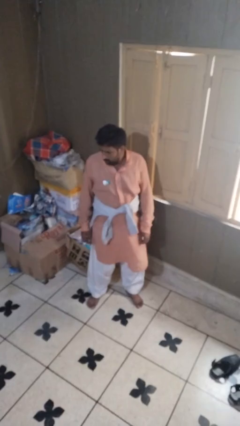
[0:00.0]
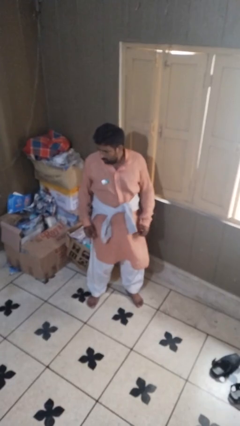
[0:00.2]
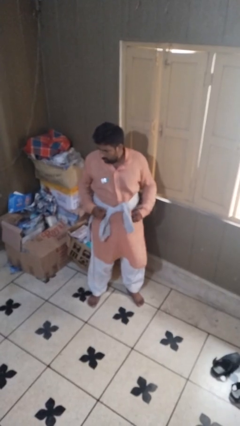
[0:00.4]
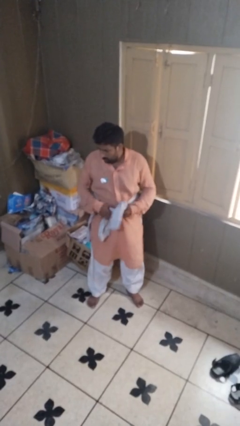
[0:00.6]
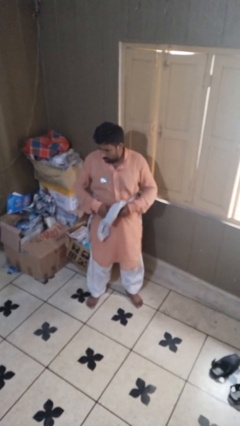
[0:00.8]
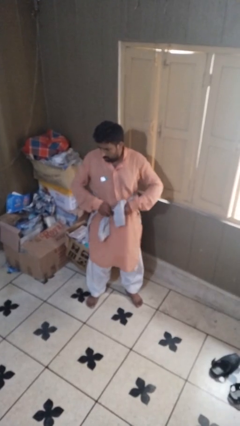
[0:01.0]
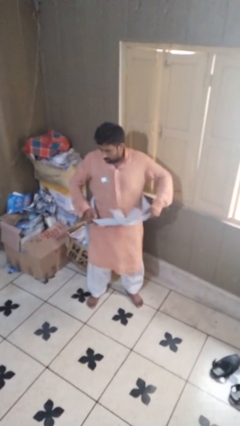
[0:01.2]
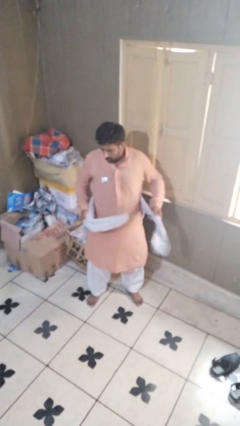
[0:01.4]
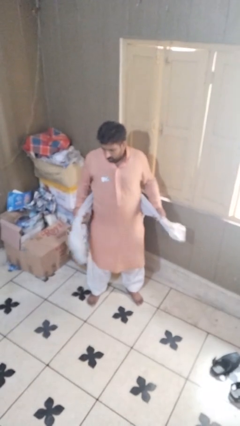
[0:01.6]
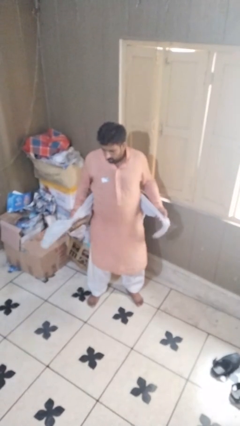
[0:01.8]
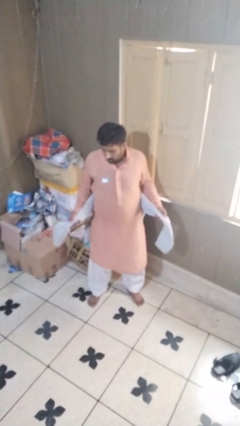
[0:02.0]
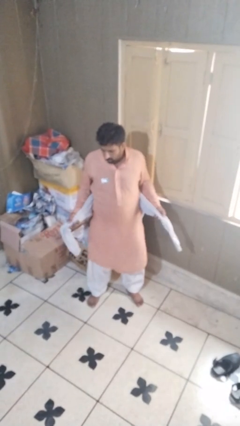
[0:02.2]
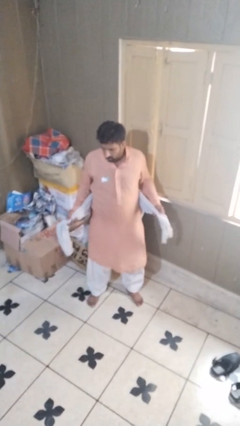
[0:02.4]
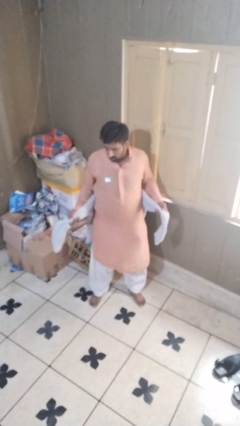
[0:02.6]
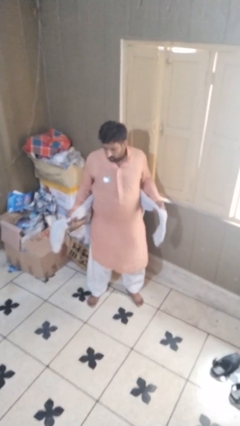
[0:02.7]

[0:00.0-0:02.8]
person unties jacket around waist

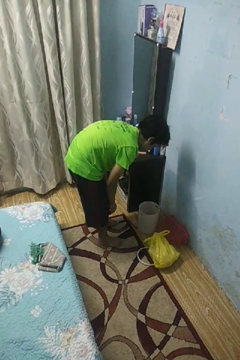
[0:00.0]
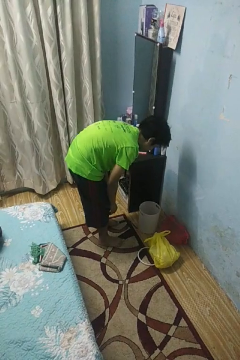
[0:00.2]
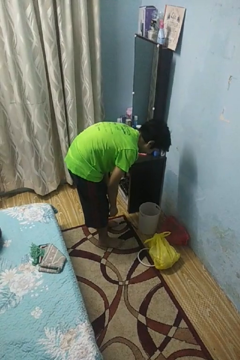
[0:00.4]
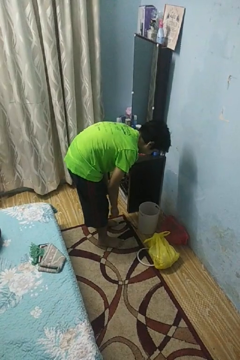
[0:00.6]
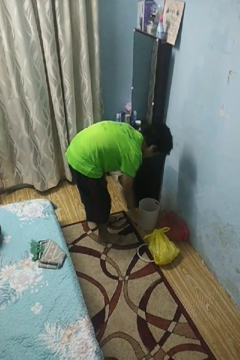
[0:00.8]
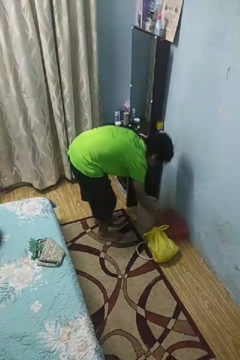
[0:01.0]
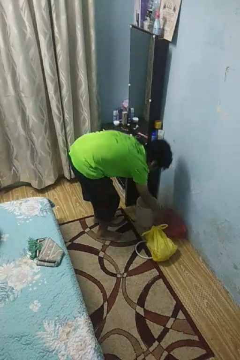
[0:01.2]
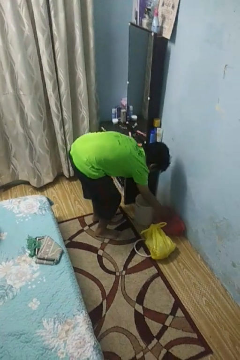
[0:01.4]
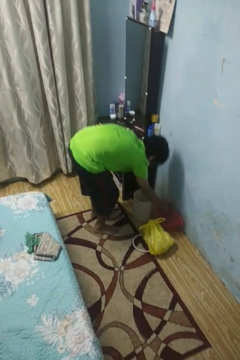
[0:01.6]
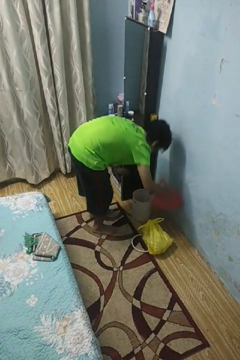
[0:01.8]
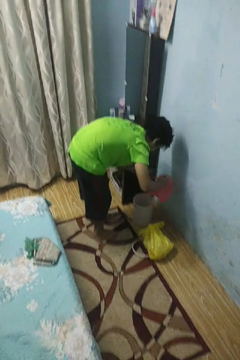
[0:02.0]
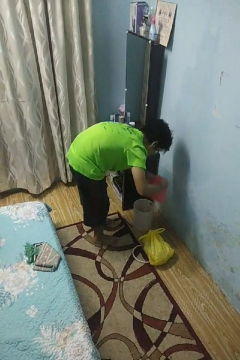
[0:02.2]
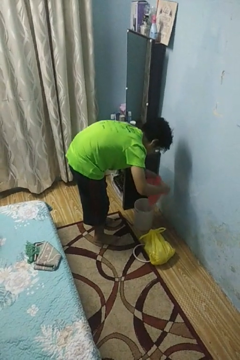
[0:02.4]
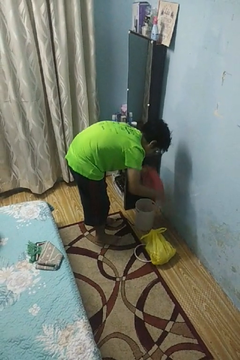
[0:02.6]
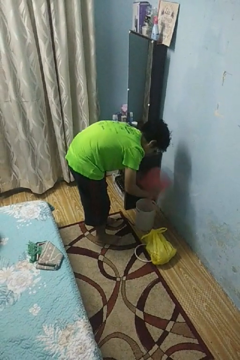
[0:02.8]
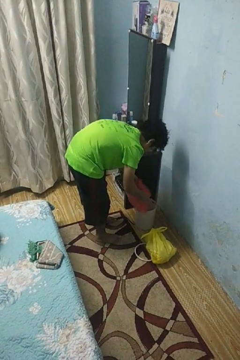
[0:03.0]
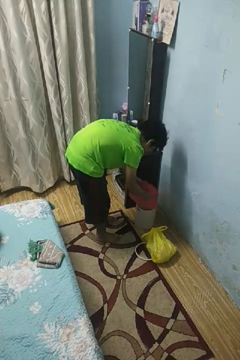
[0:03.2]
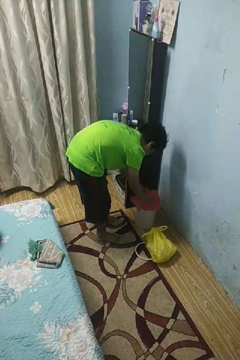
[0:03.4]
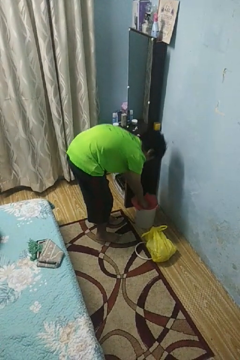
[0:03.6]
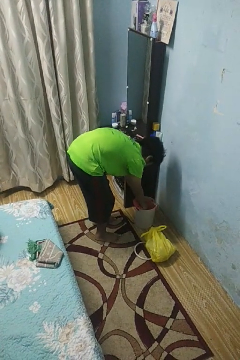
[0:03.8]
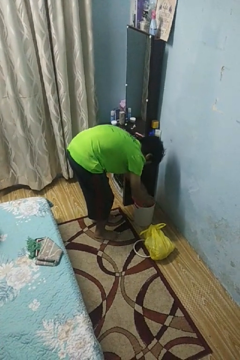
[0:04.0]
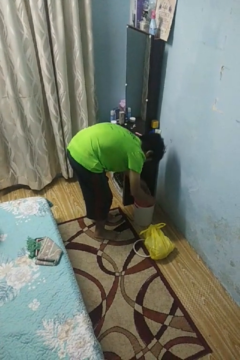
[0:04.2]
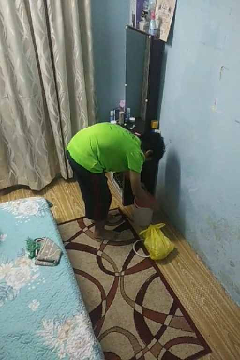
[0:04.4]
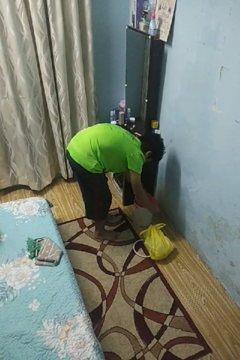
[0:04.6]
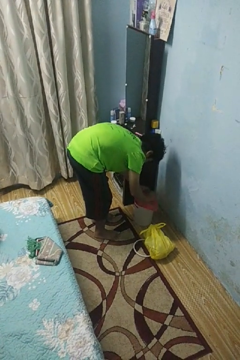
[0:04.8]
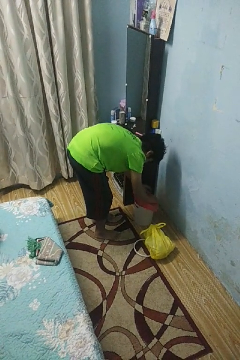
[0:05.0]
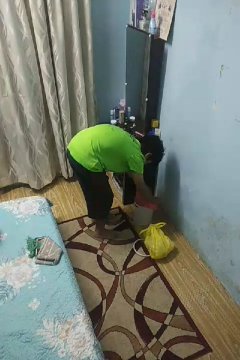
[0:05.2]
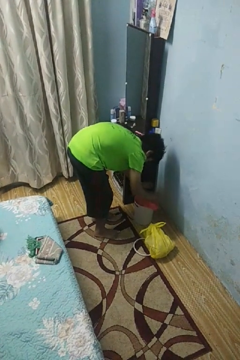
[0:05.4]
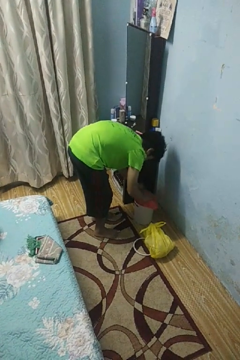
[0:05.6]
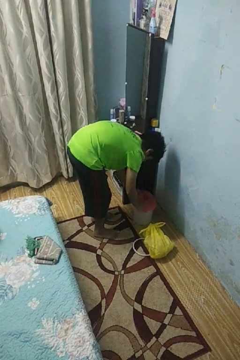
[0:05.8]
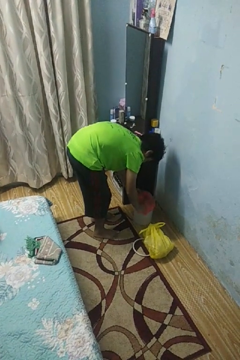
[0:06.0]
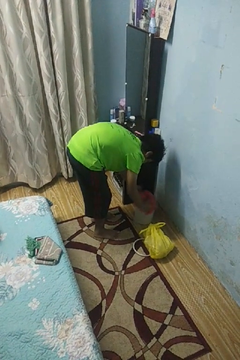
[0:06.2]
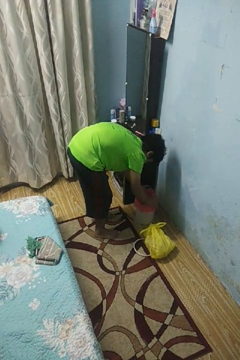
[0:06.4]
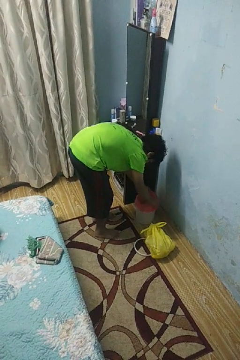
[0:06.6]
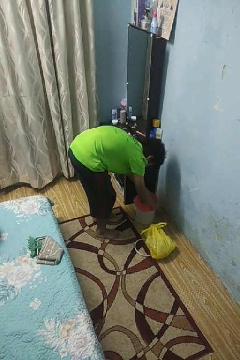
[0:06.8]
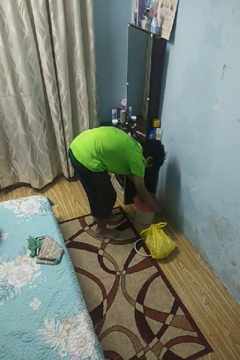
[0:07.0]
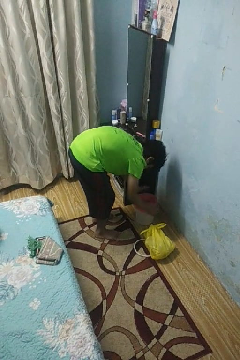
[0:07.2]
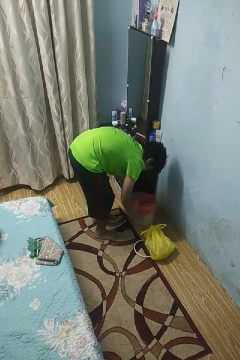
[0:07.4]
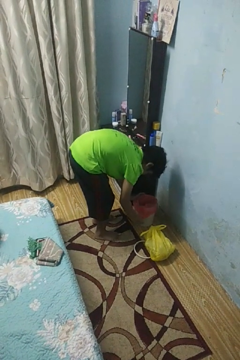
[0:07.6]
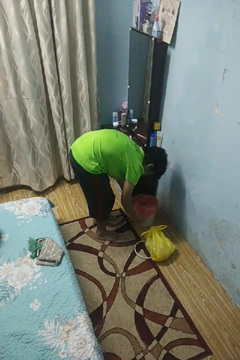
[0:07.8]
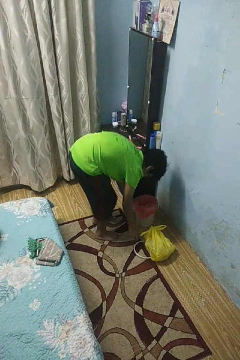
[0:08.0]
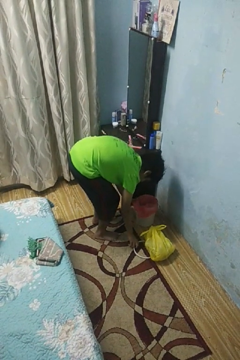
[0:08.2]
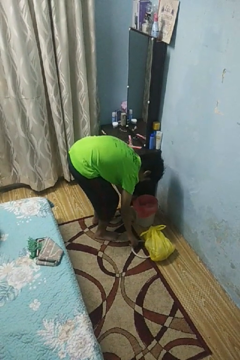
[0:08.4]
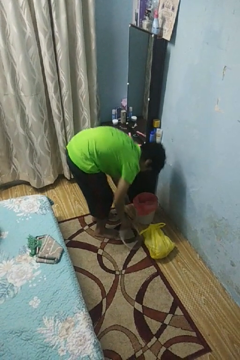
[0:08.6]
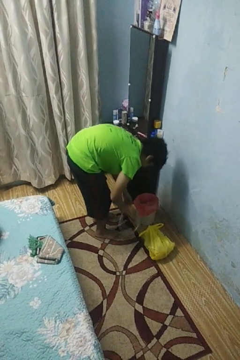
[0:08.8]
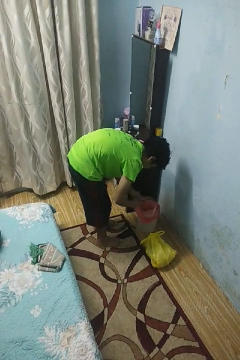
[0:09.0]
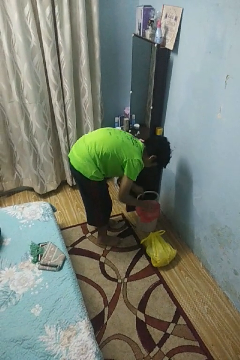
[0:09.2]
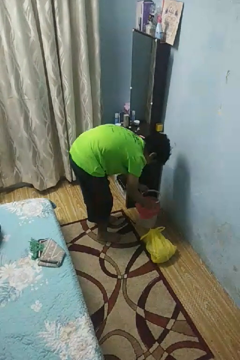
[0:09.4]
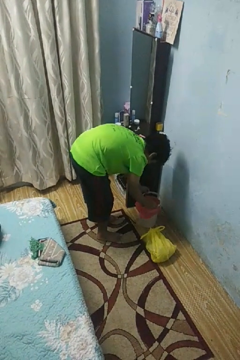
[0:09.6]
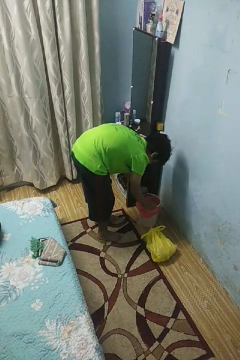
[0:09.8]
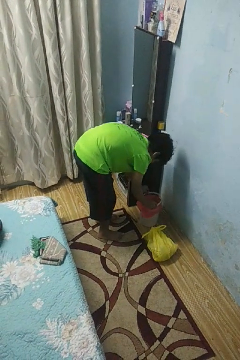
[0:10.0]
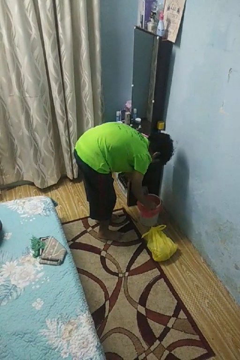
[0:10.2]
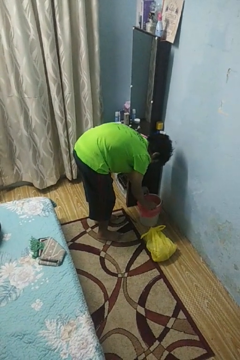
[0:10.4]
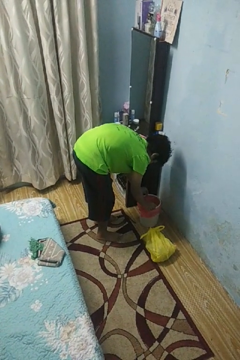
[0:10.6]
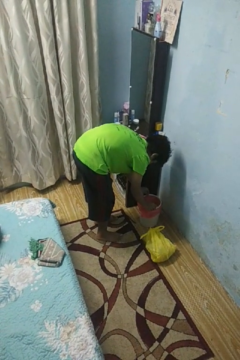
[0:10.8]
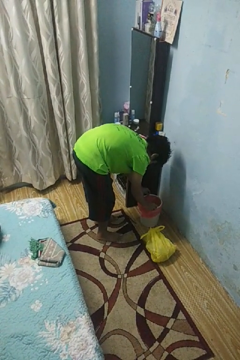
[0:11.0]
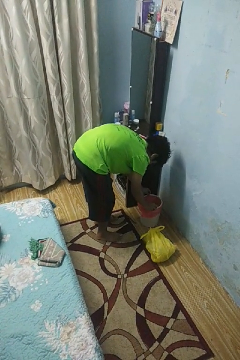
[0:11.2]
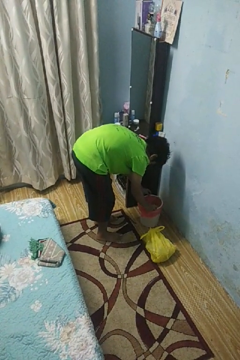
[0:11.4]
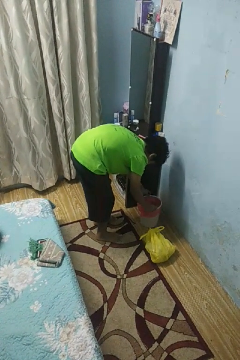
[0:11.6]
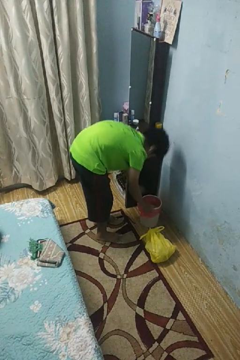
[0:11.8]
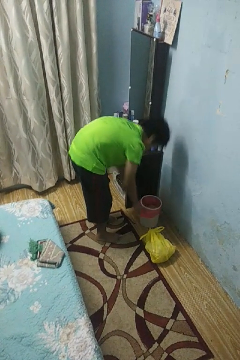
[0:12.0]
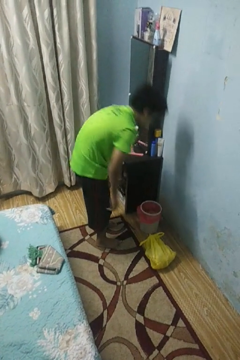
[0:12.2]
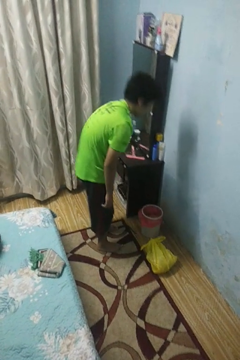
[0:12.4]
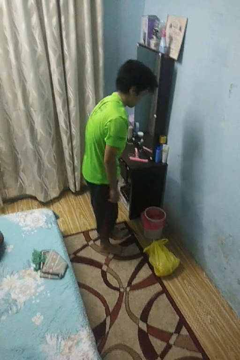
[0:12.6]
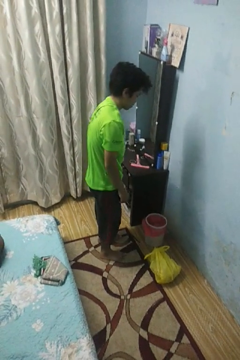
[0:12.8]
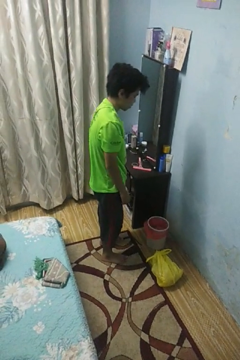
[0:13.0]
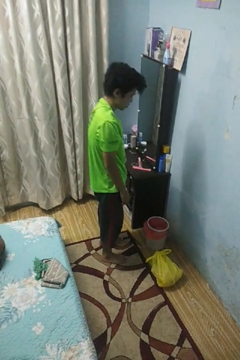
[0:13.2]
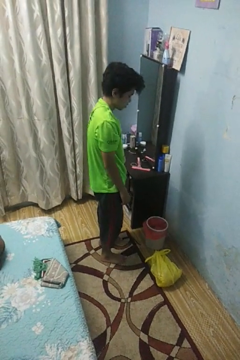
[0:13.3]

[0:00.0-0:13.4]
person inserts trashbag into trashcan

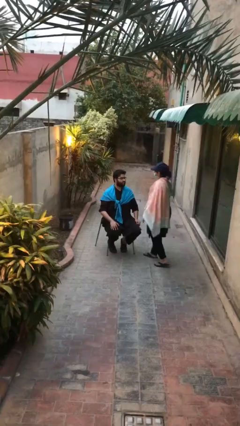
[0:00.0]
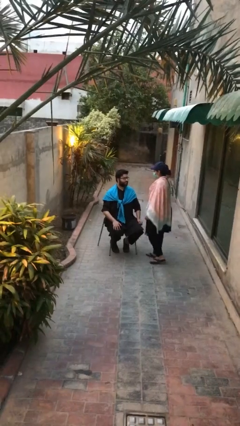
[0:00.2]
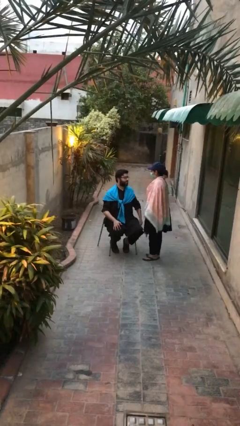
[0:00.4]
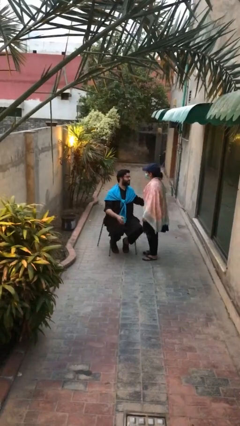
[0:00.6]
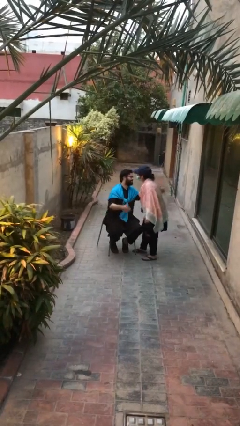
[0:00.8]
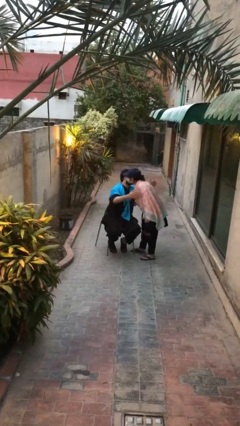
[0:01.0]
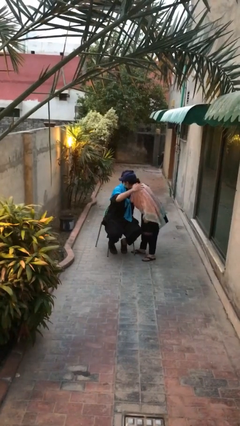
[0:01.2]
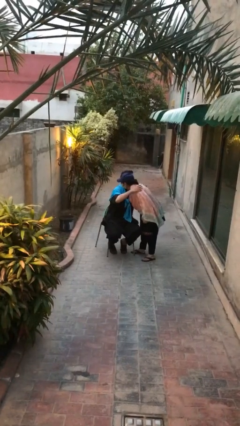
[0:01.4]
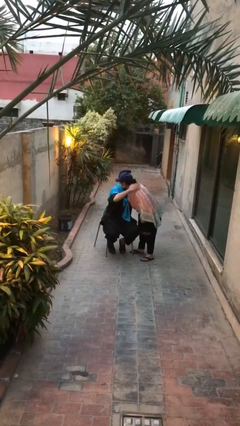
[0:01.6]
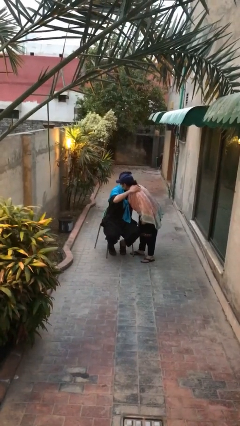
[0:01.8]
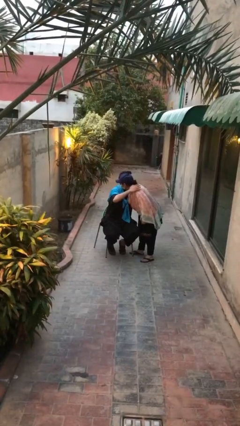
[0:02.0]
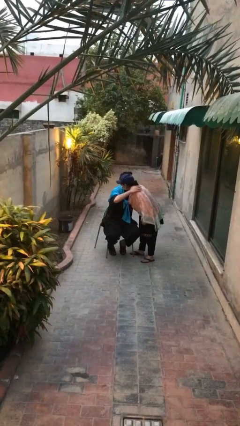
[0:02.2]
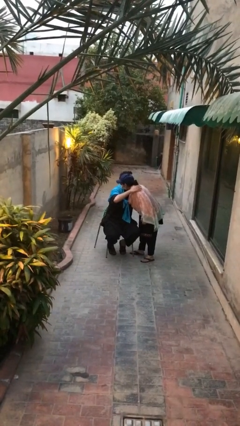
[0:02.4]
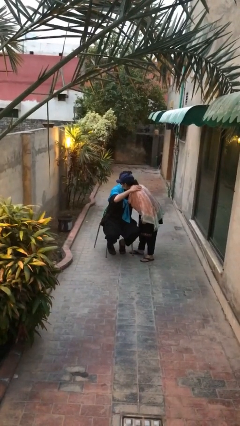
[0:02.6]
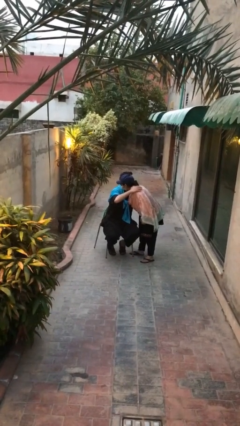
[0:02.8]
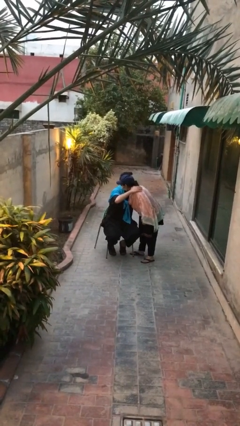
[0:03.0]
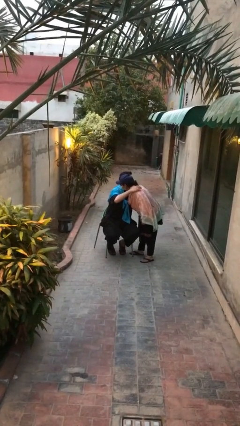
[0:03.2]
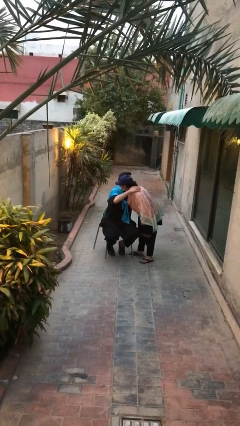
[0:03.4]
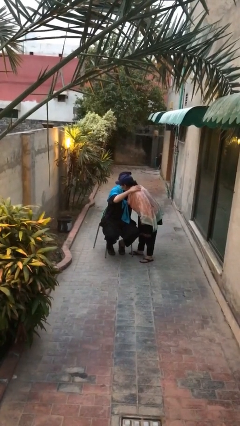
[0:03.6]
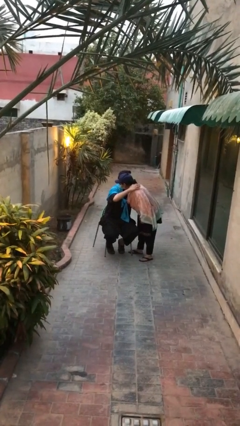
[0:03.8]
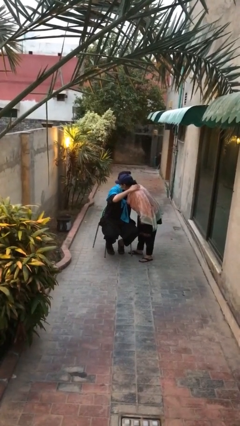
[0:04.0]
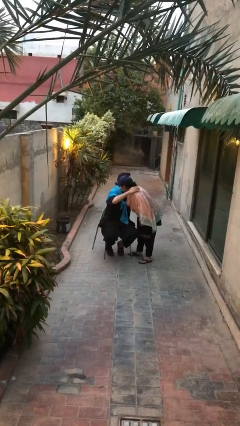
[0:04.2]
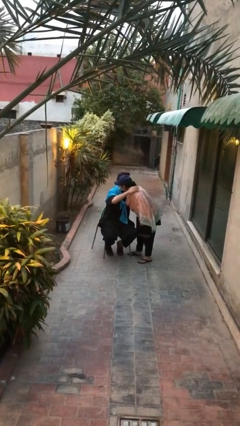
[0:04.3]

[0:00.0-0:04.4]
person embraces person
